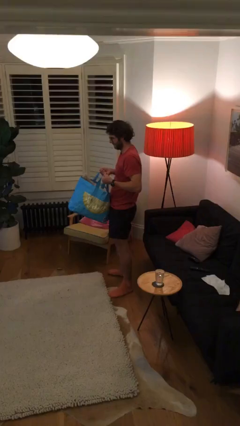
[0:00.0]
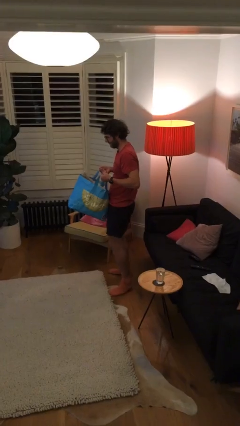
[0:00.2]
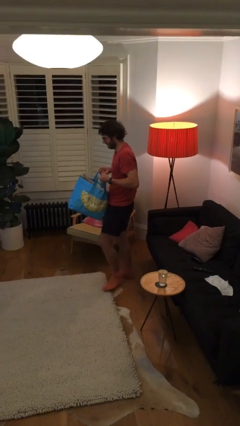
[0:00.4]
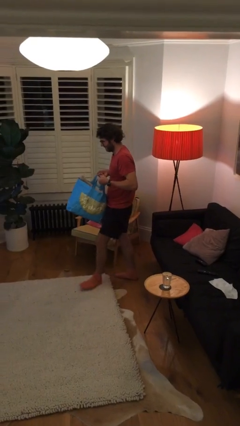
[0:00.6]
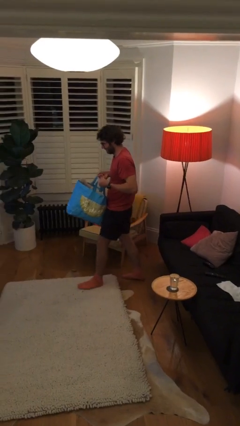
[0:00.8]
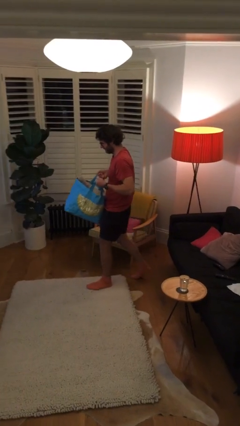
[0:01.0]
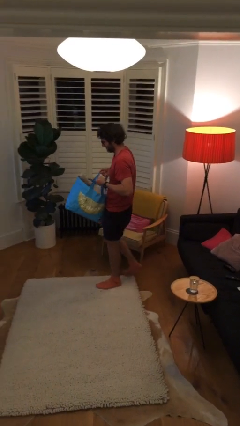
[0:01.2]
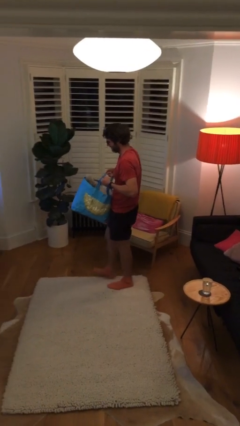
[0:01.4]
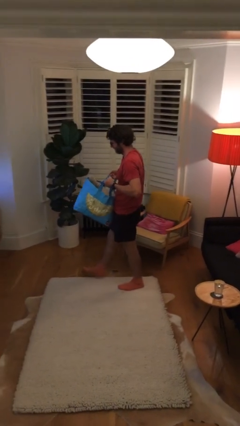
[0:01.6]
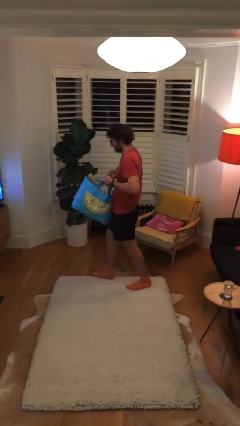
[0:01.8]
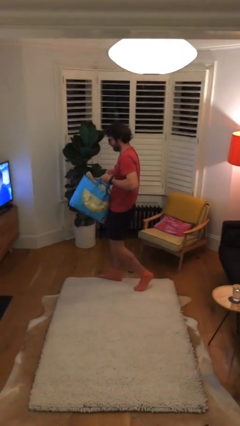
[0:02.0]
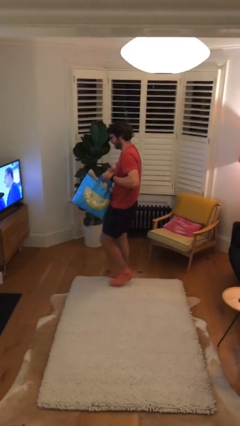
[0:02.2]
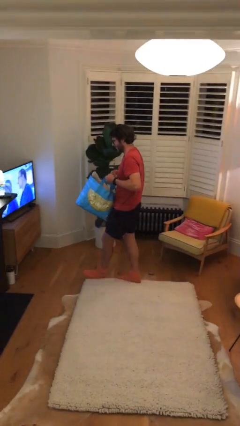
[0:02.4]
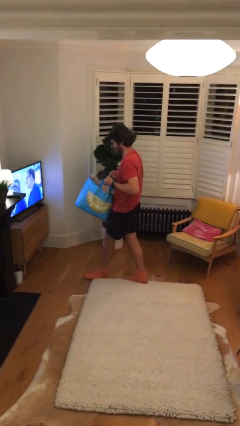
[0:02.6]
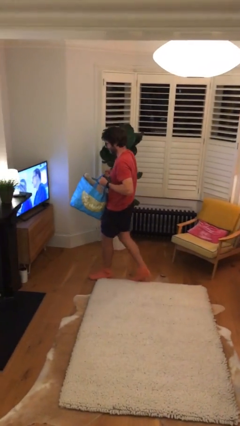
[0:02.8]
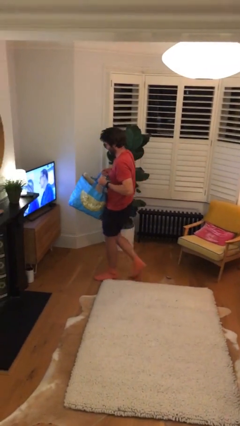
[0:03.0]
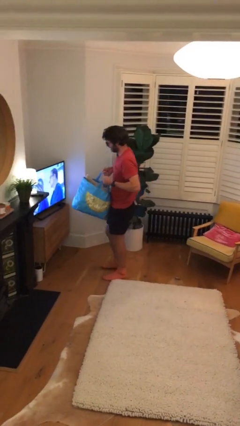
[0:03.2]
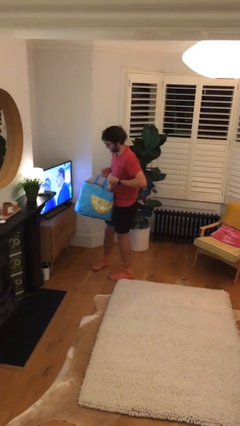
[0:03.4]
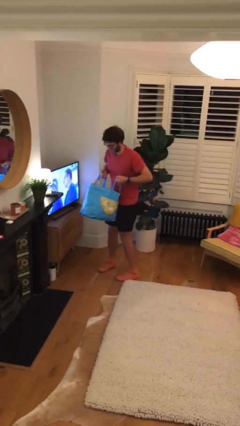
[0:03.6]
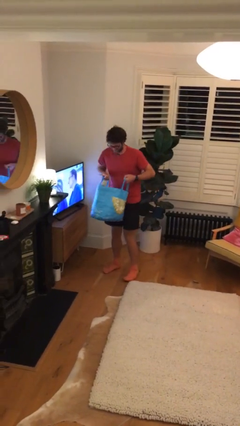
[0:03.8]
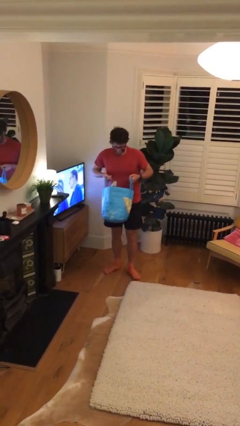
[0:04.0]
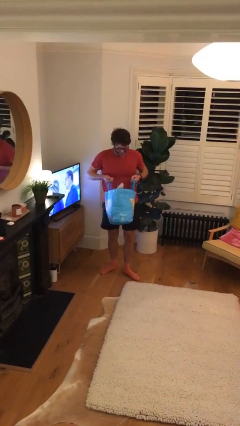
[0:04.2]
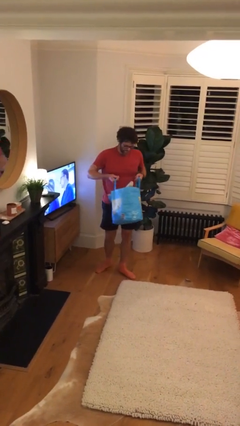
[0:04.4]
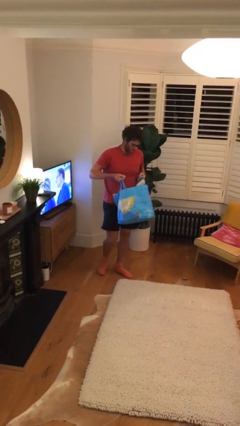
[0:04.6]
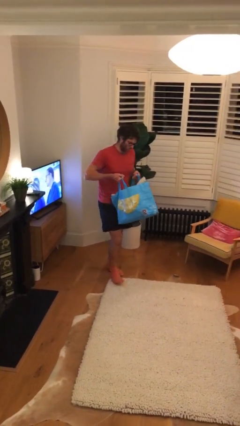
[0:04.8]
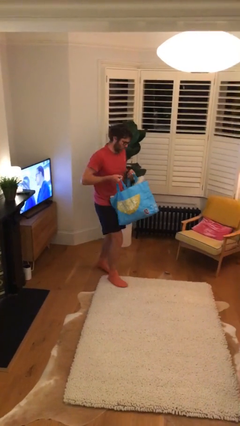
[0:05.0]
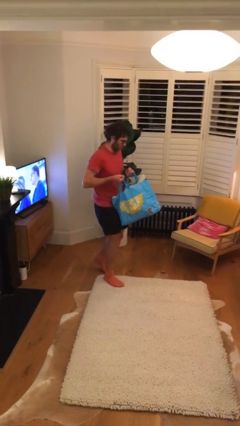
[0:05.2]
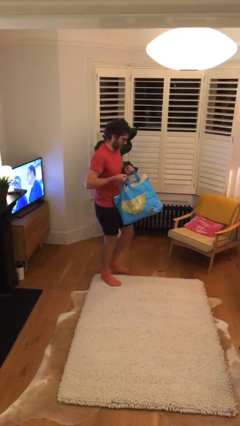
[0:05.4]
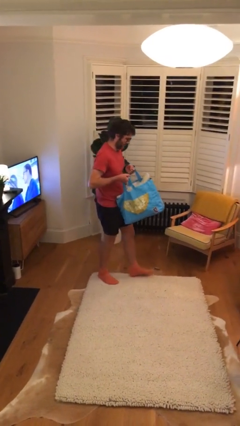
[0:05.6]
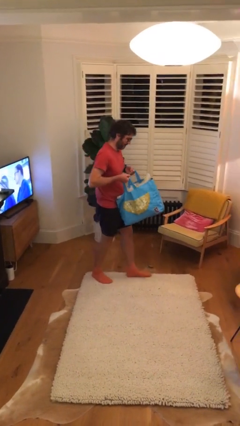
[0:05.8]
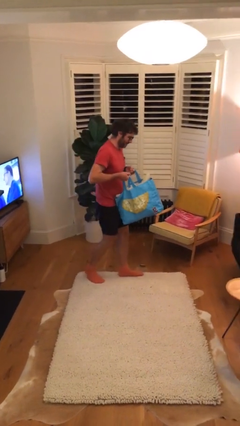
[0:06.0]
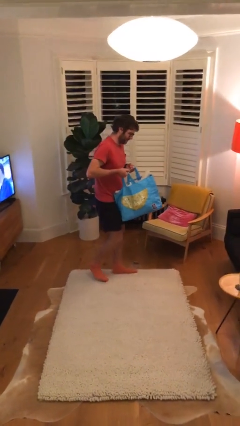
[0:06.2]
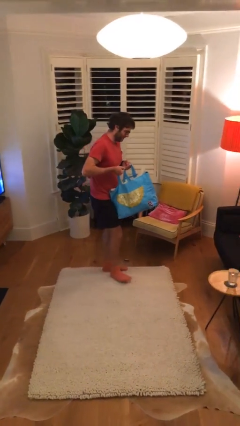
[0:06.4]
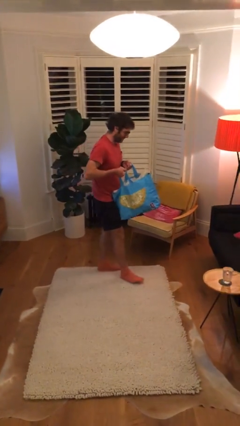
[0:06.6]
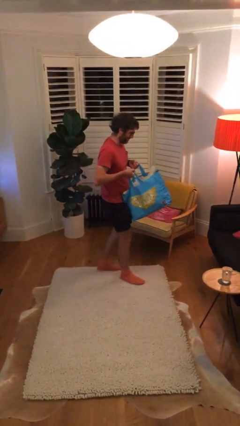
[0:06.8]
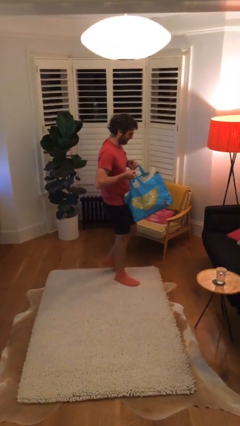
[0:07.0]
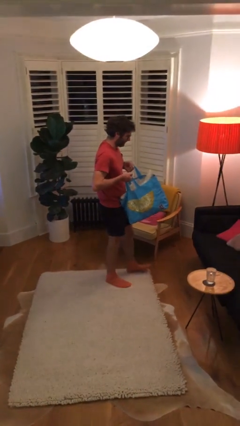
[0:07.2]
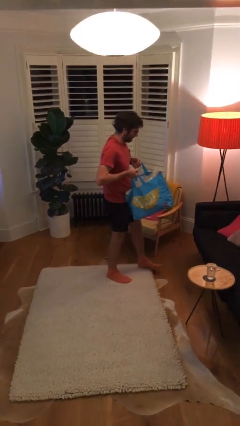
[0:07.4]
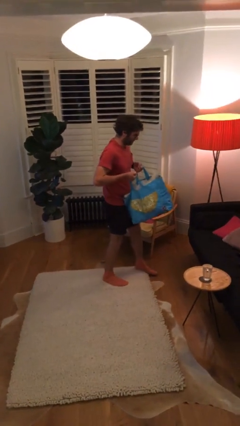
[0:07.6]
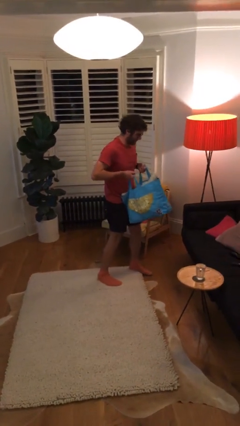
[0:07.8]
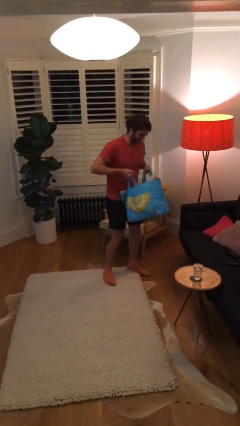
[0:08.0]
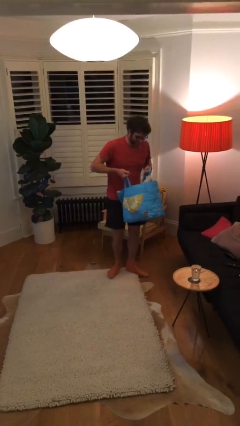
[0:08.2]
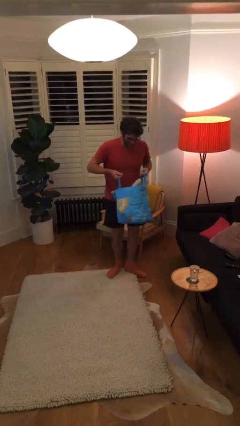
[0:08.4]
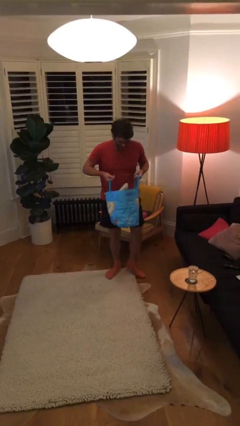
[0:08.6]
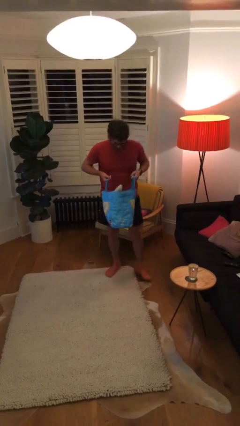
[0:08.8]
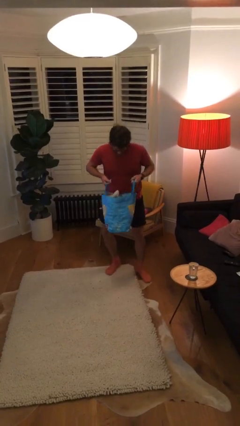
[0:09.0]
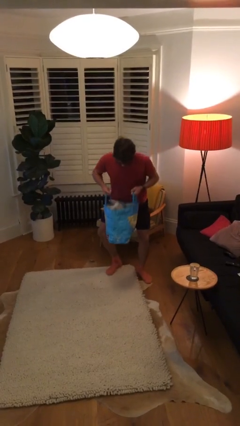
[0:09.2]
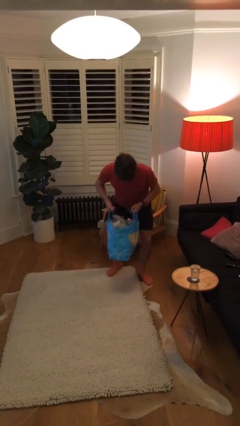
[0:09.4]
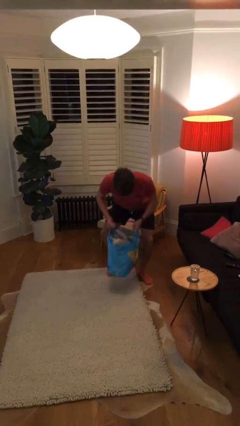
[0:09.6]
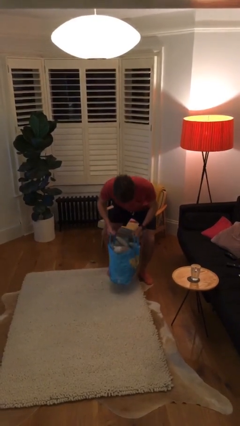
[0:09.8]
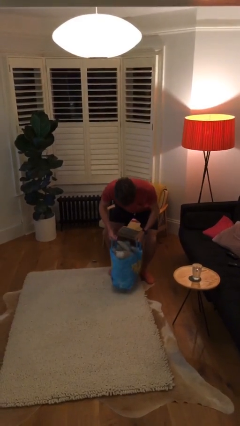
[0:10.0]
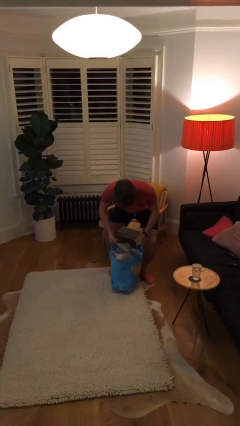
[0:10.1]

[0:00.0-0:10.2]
person carries heavy object

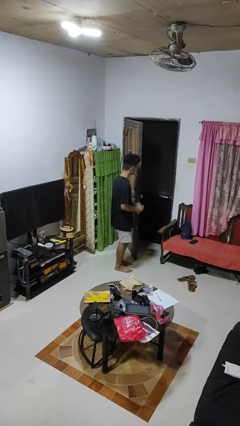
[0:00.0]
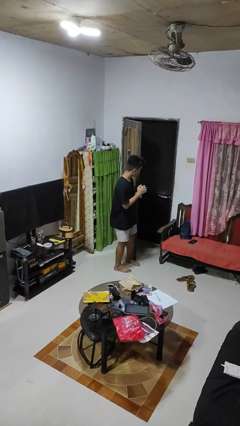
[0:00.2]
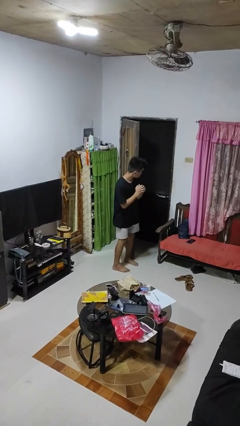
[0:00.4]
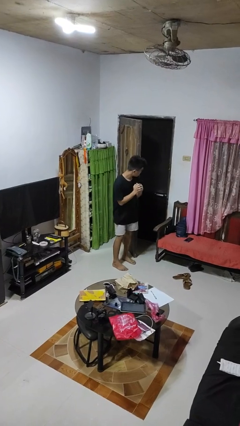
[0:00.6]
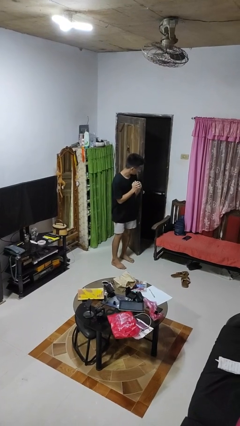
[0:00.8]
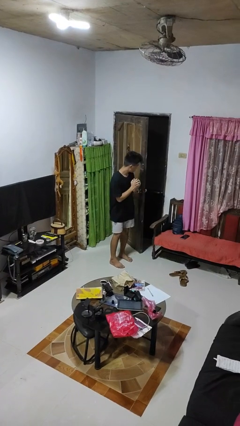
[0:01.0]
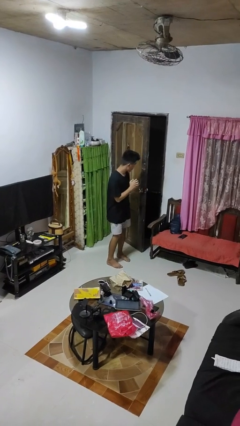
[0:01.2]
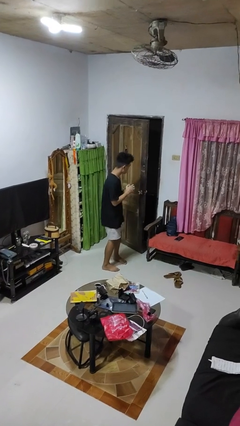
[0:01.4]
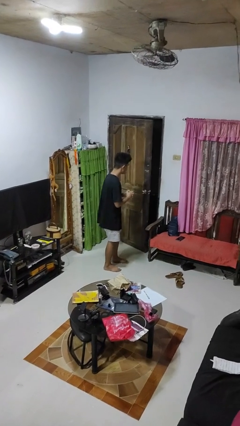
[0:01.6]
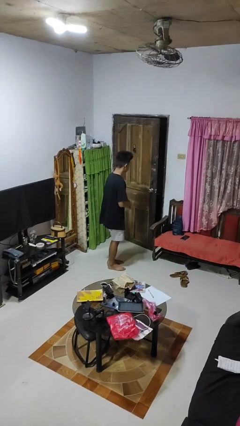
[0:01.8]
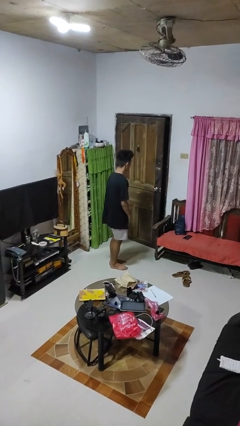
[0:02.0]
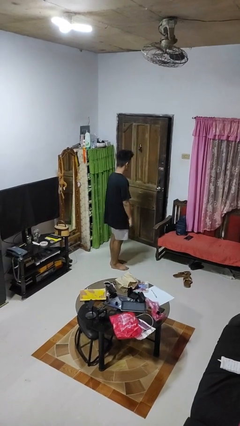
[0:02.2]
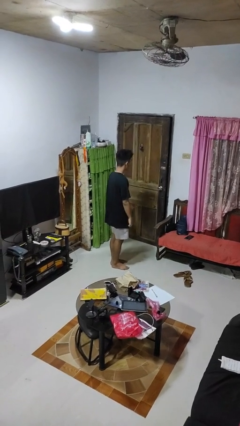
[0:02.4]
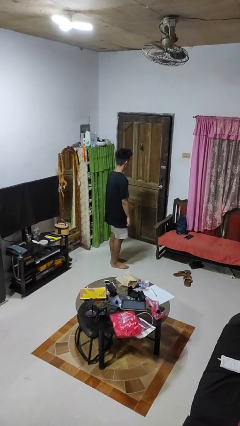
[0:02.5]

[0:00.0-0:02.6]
person closes door with hip

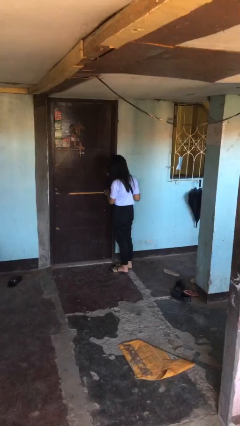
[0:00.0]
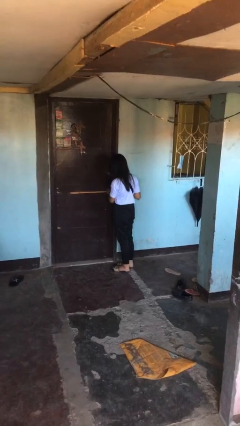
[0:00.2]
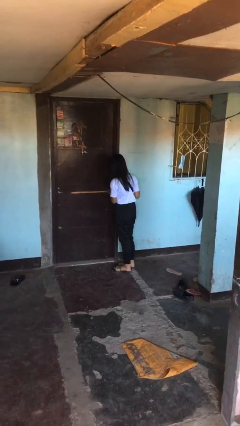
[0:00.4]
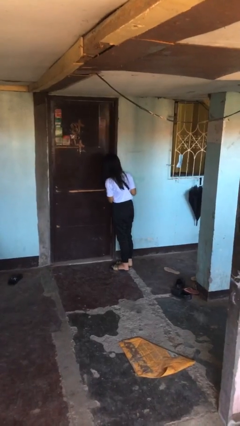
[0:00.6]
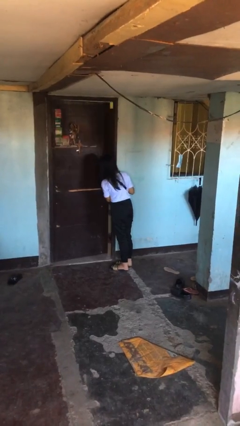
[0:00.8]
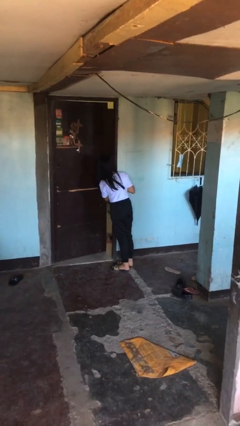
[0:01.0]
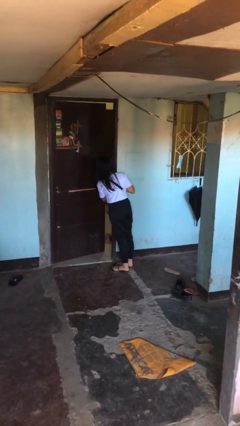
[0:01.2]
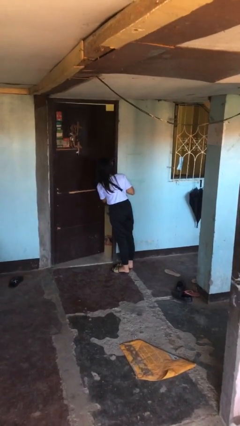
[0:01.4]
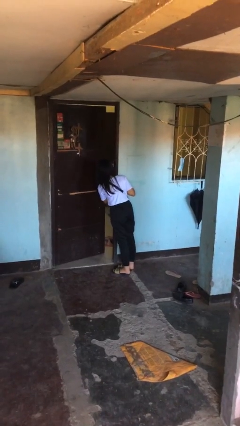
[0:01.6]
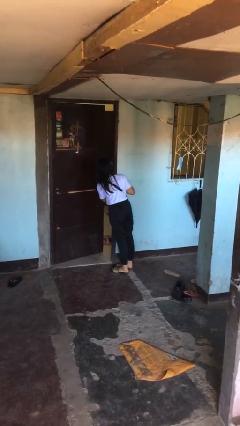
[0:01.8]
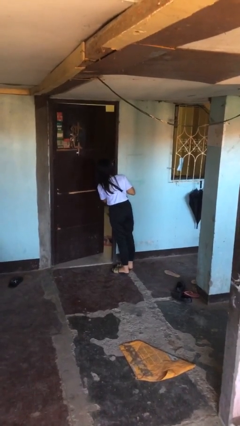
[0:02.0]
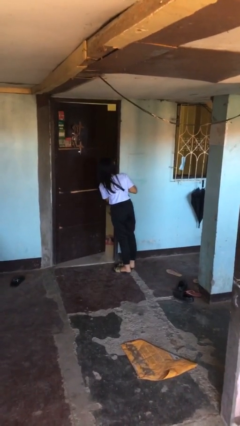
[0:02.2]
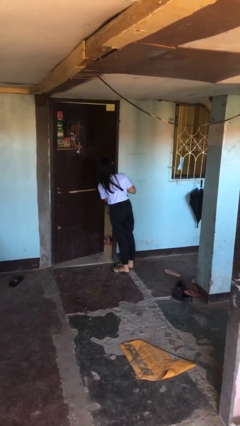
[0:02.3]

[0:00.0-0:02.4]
person opens facility door

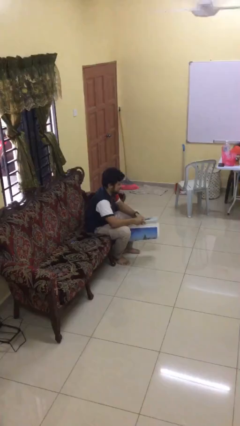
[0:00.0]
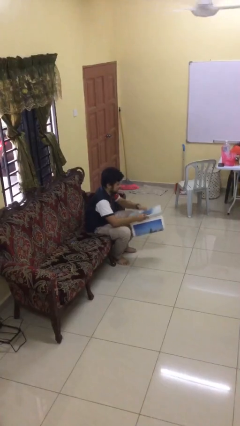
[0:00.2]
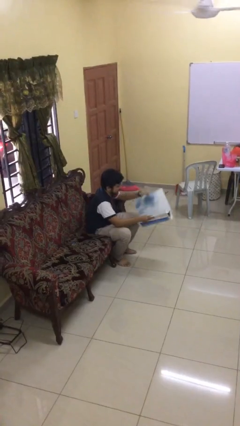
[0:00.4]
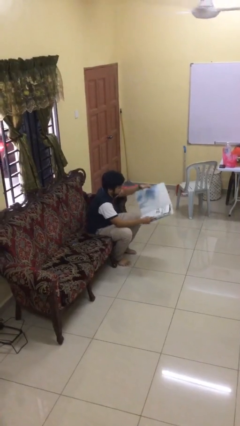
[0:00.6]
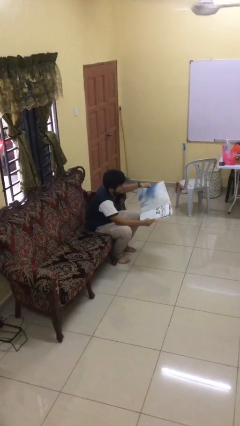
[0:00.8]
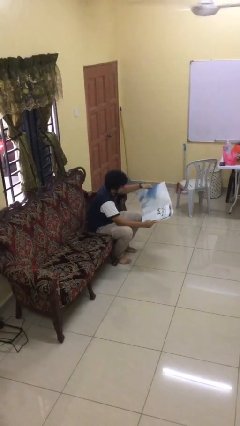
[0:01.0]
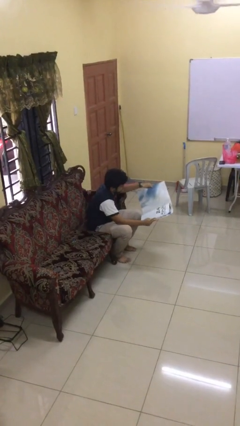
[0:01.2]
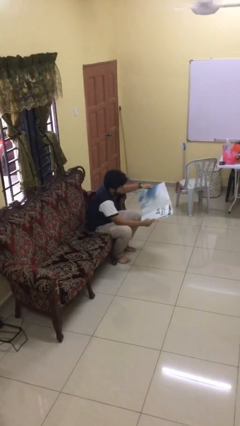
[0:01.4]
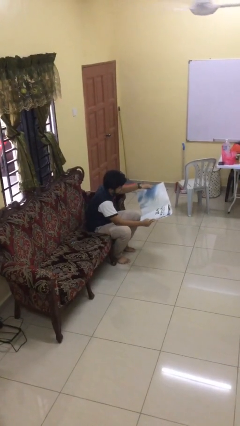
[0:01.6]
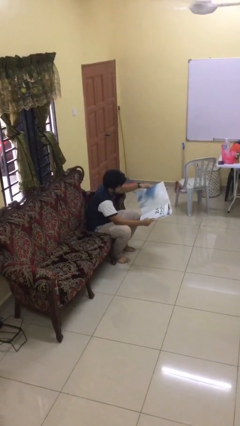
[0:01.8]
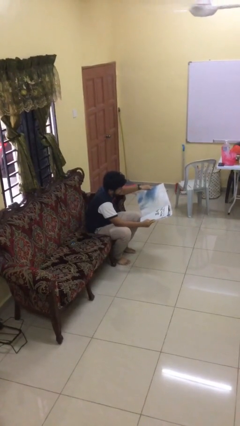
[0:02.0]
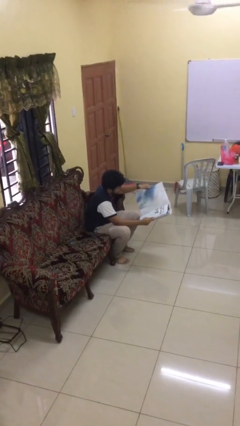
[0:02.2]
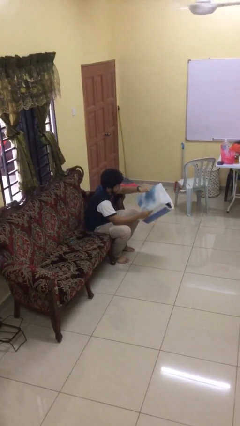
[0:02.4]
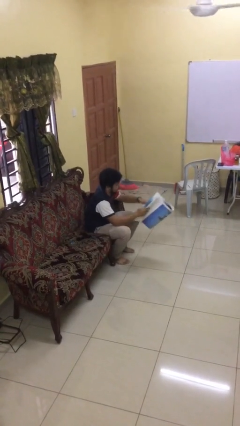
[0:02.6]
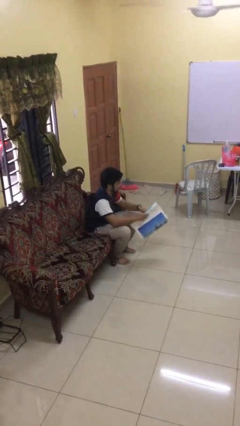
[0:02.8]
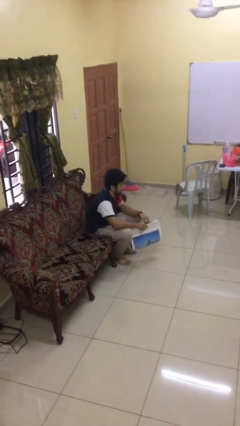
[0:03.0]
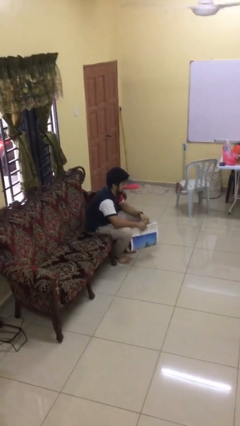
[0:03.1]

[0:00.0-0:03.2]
person reads newspaper
